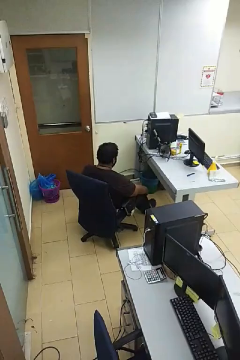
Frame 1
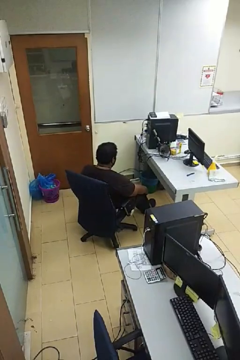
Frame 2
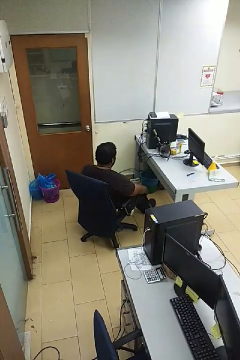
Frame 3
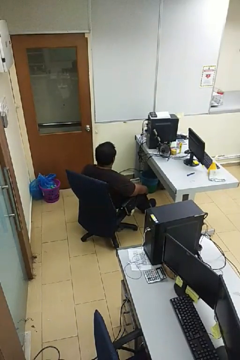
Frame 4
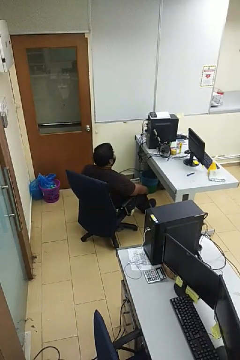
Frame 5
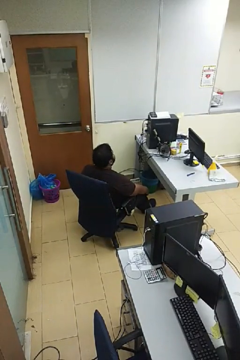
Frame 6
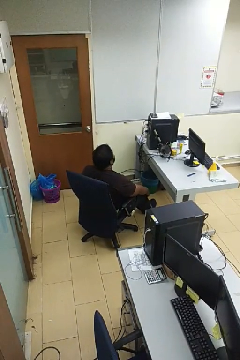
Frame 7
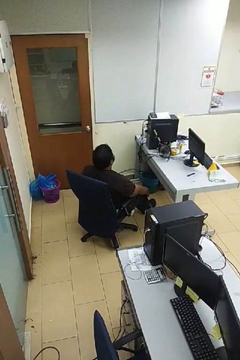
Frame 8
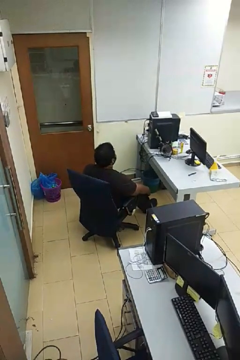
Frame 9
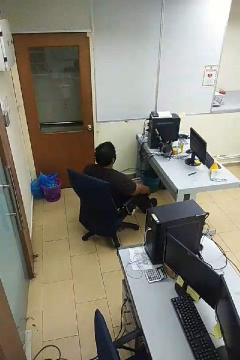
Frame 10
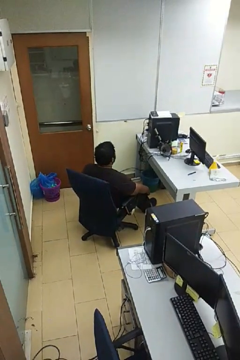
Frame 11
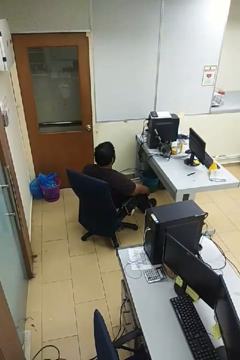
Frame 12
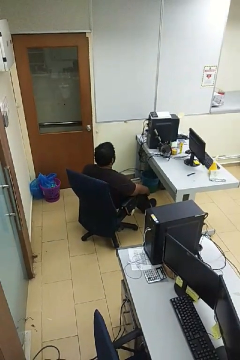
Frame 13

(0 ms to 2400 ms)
person shakes head

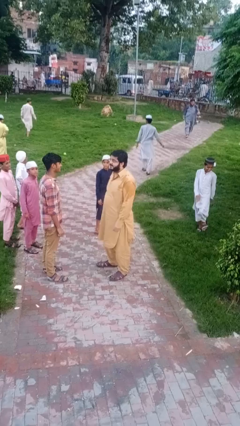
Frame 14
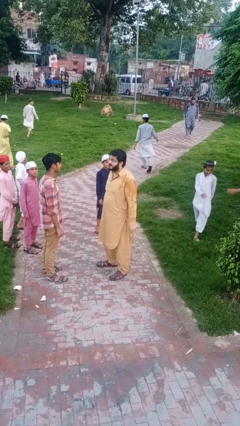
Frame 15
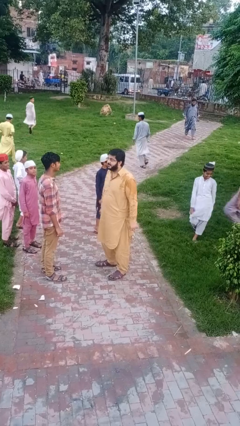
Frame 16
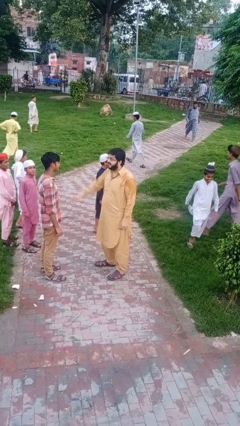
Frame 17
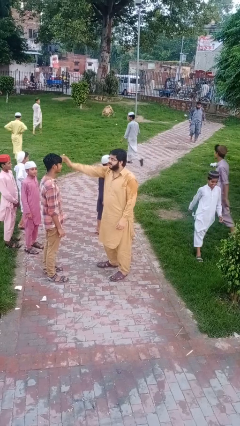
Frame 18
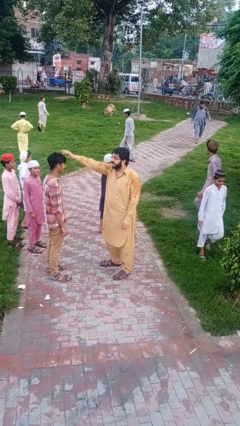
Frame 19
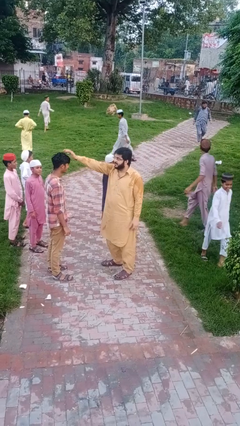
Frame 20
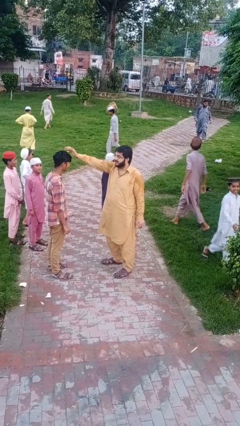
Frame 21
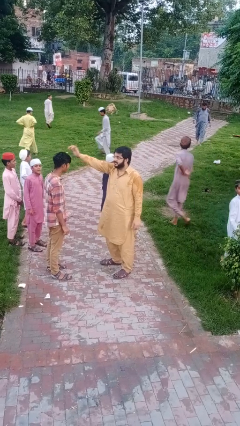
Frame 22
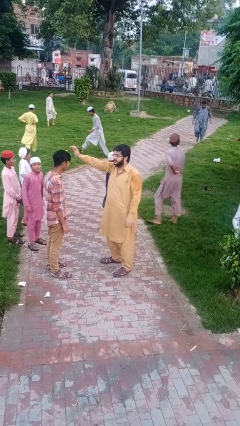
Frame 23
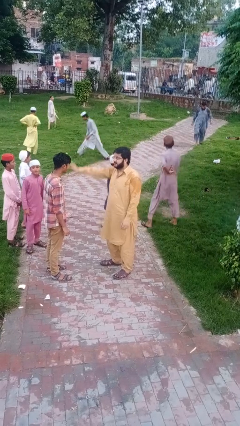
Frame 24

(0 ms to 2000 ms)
person grabs person by hair

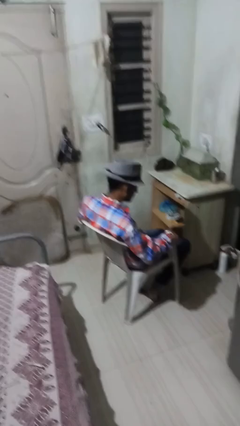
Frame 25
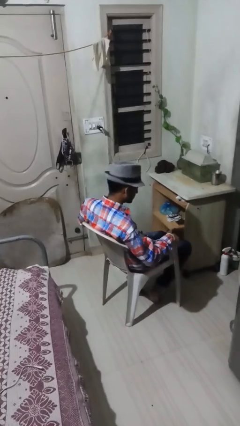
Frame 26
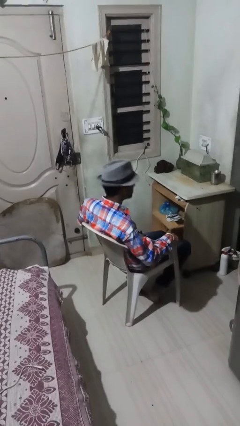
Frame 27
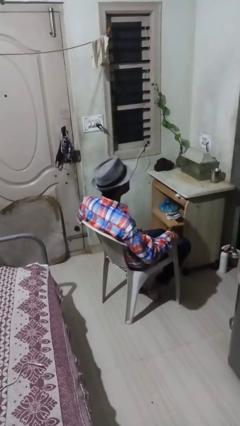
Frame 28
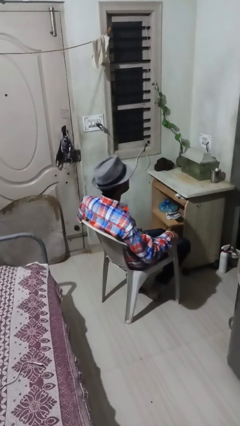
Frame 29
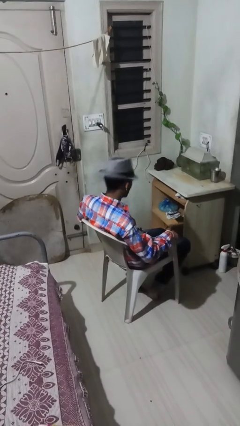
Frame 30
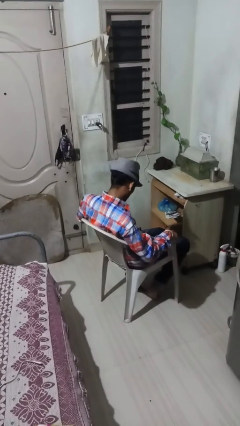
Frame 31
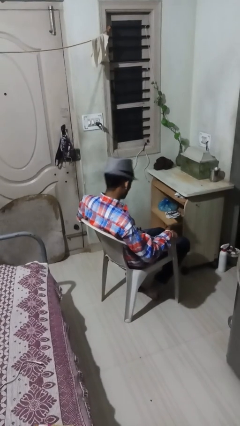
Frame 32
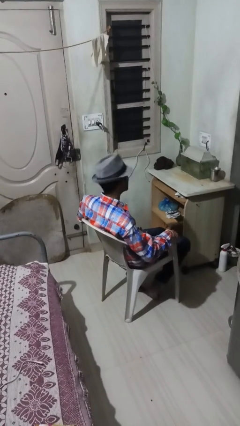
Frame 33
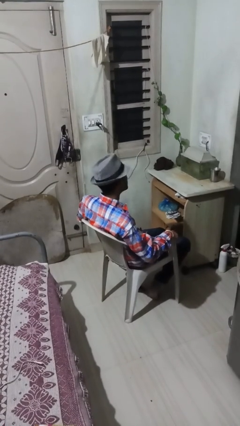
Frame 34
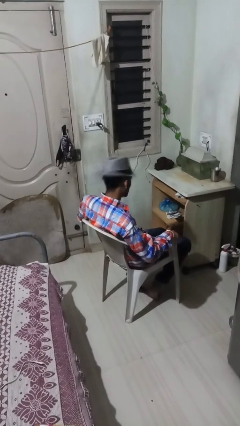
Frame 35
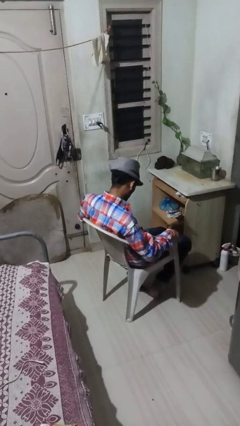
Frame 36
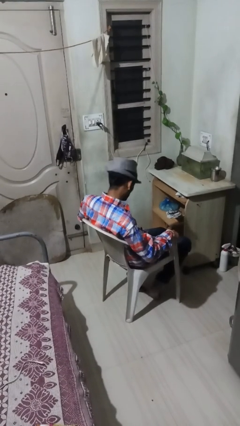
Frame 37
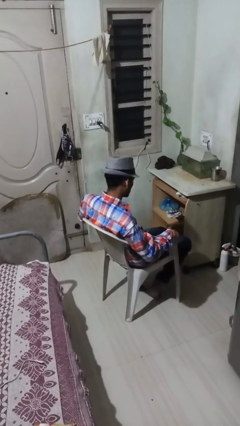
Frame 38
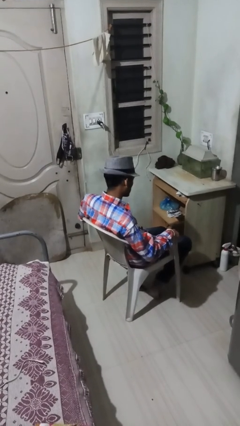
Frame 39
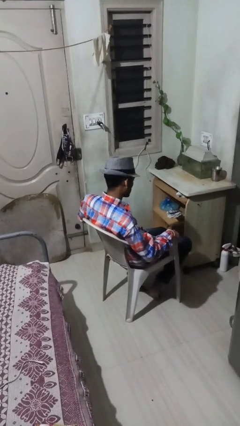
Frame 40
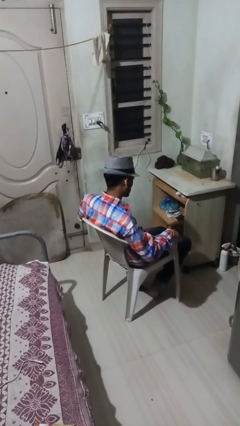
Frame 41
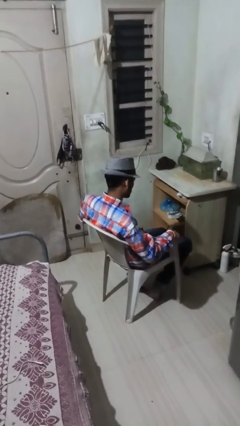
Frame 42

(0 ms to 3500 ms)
person nods head

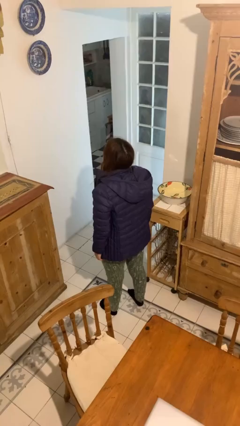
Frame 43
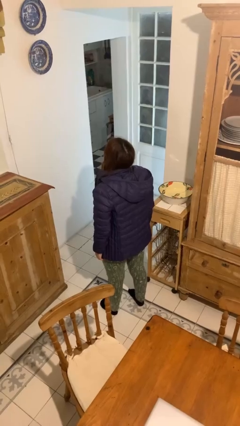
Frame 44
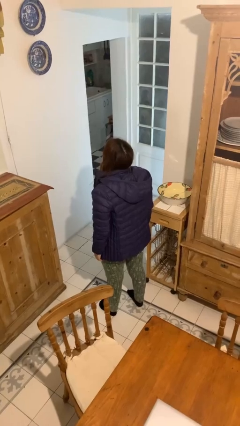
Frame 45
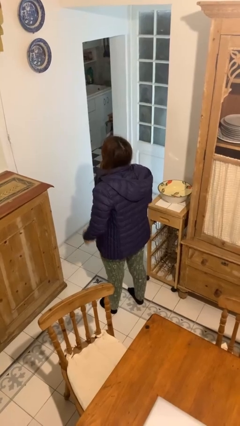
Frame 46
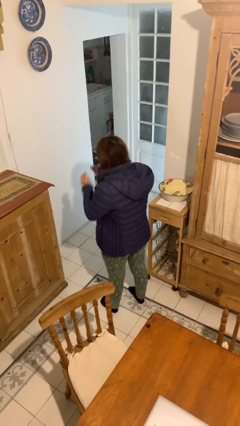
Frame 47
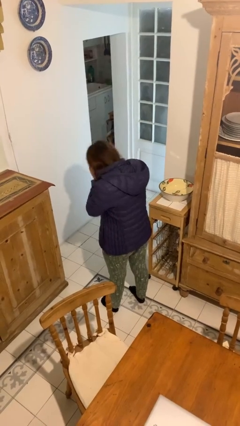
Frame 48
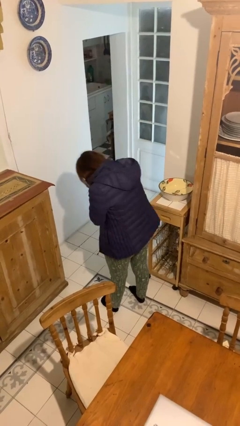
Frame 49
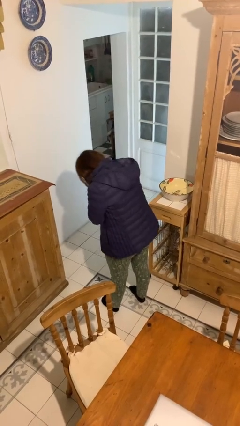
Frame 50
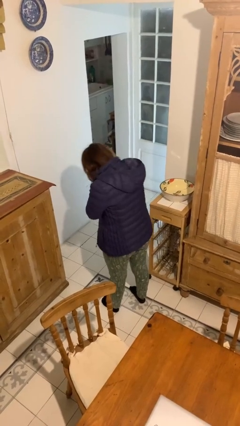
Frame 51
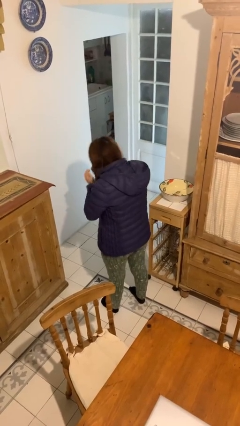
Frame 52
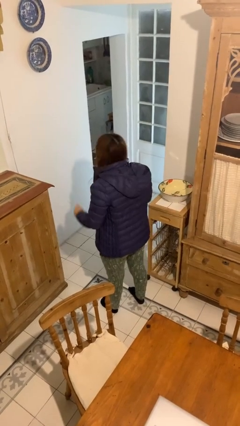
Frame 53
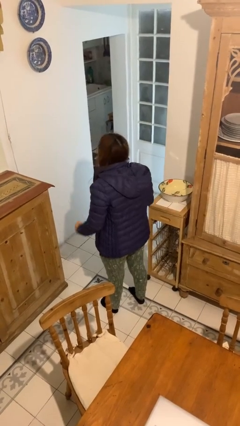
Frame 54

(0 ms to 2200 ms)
person sneezes into hand

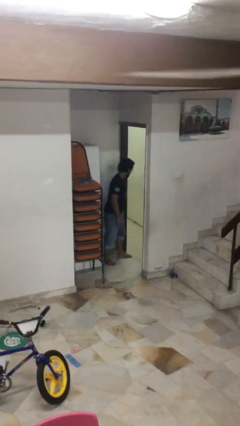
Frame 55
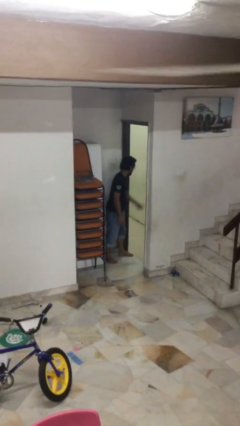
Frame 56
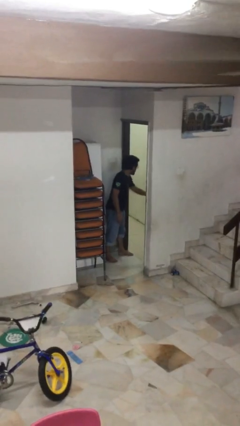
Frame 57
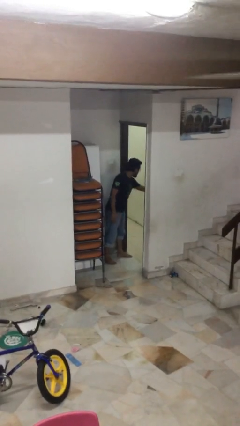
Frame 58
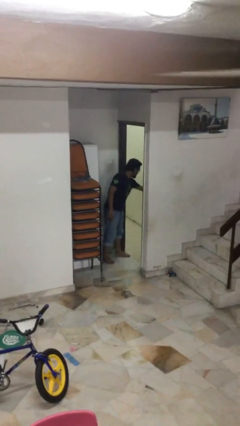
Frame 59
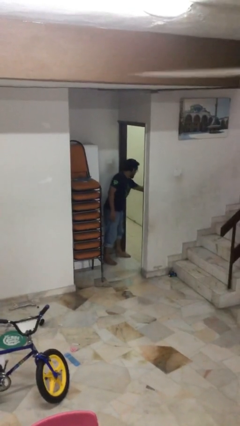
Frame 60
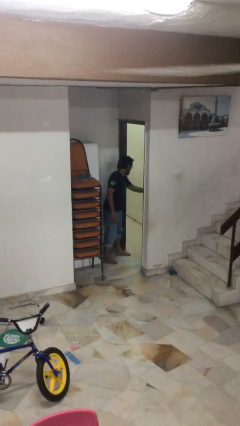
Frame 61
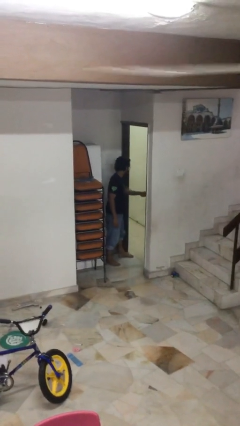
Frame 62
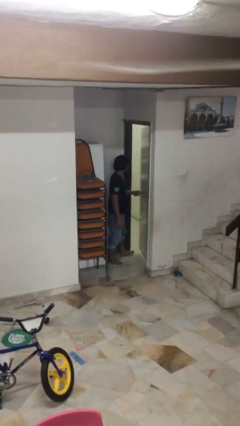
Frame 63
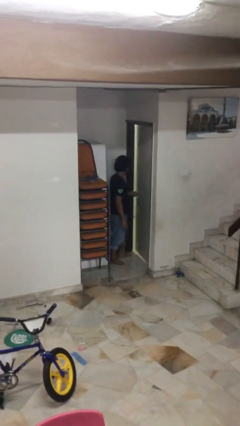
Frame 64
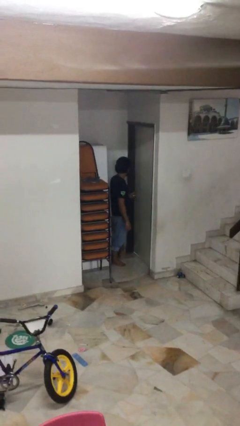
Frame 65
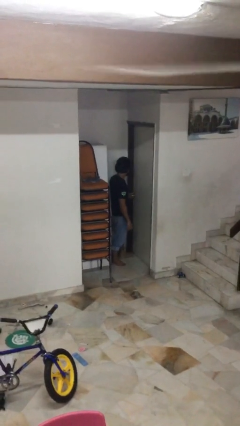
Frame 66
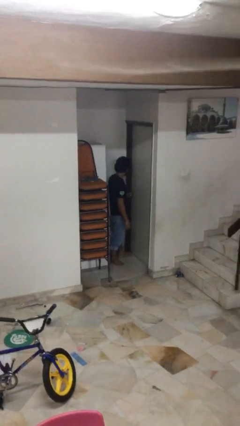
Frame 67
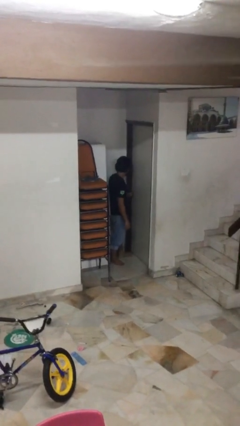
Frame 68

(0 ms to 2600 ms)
person closes facility door

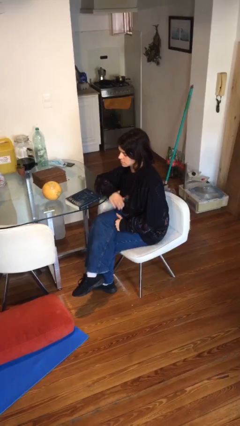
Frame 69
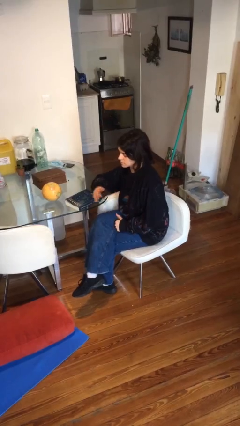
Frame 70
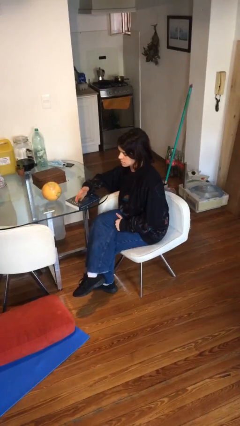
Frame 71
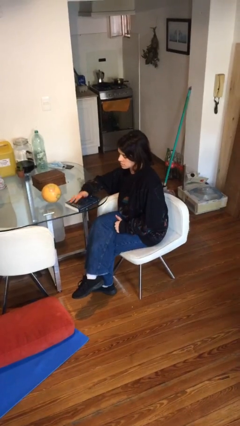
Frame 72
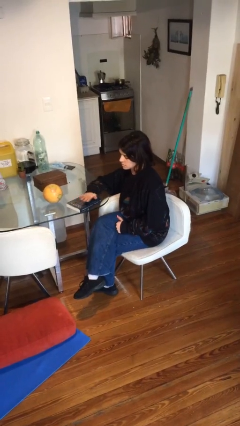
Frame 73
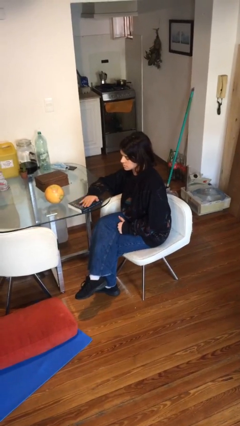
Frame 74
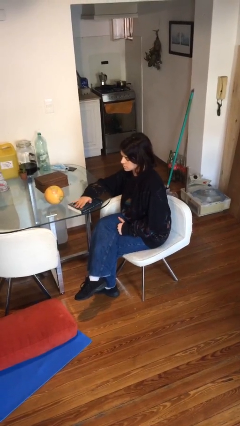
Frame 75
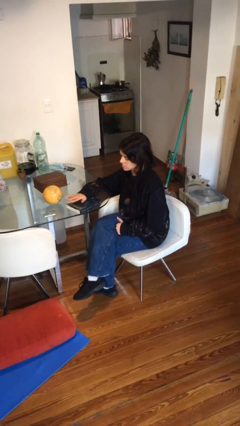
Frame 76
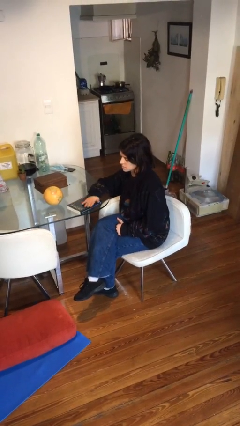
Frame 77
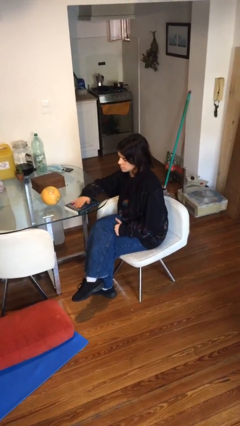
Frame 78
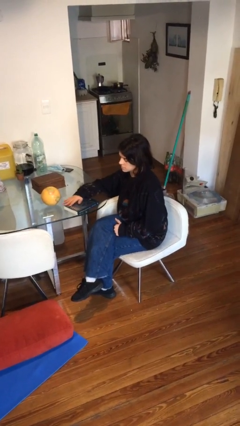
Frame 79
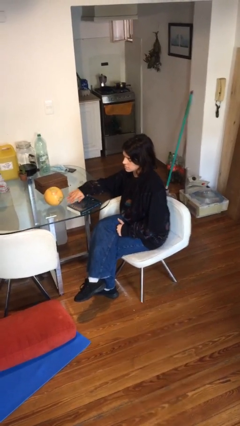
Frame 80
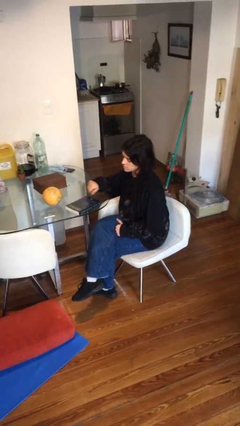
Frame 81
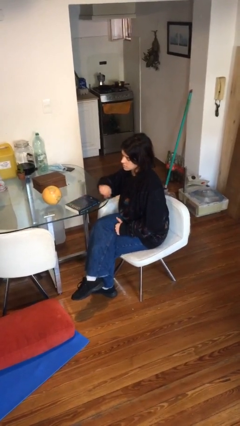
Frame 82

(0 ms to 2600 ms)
person waves hand over object

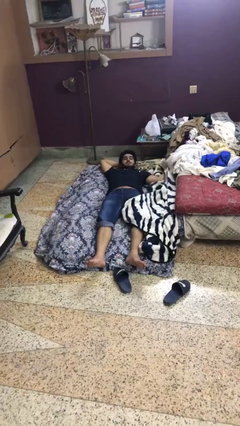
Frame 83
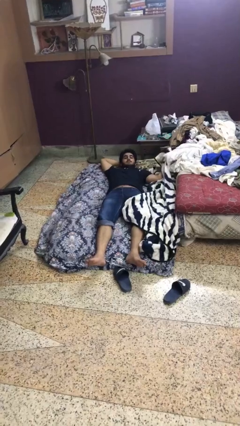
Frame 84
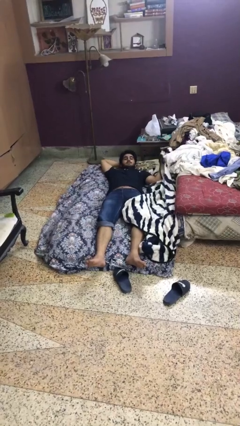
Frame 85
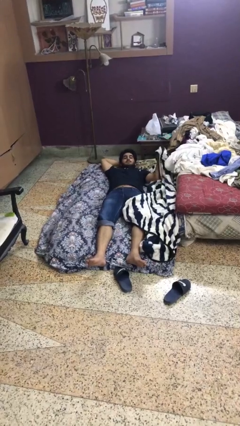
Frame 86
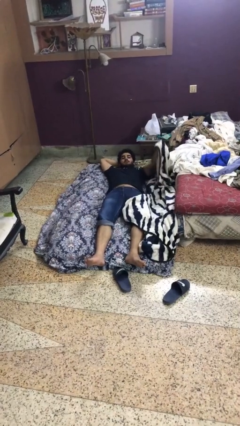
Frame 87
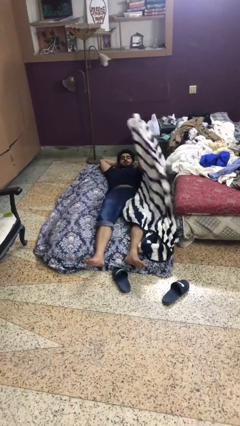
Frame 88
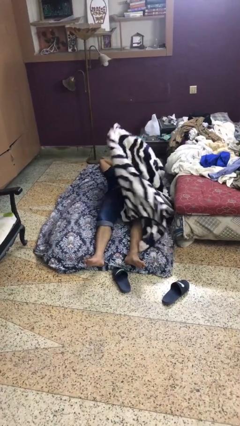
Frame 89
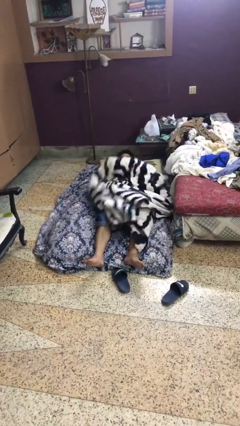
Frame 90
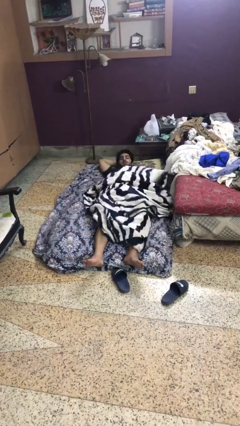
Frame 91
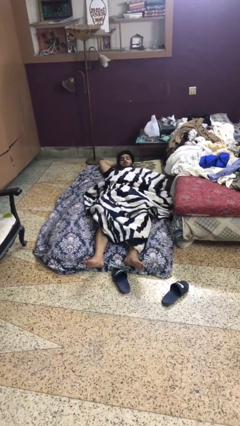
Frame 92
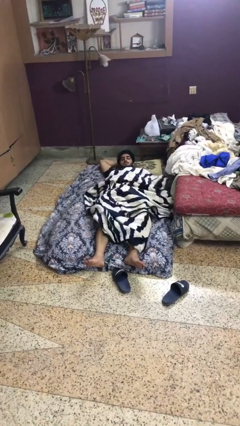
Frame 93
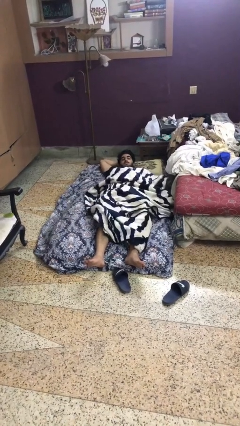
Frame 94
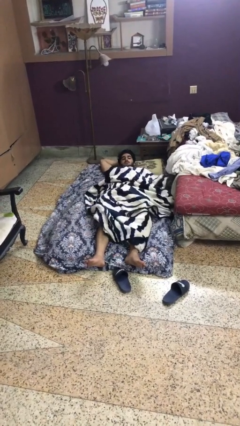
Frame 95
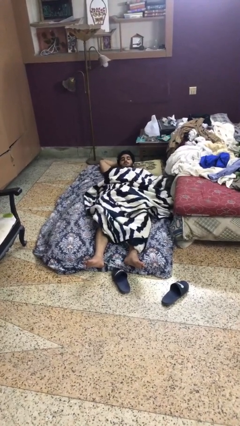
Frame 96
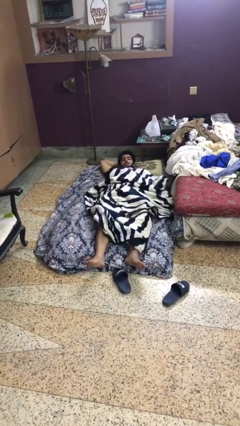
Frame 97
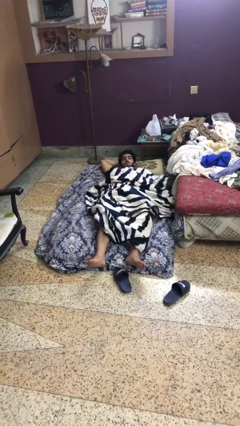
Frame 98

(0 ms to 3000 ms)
person covers with blanket
